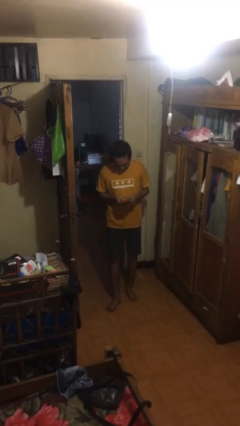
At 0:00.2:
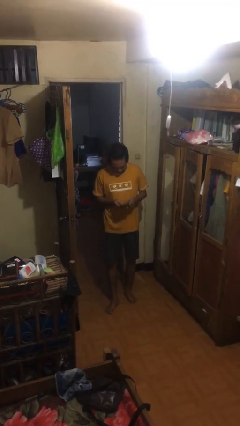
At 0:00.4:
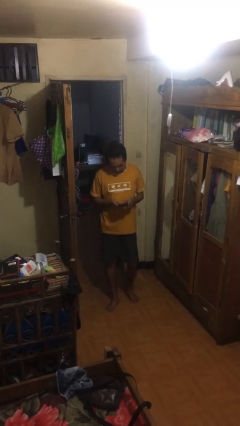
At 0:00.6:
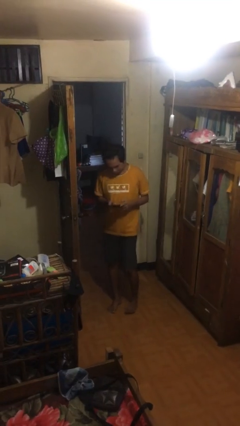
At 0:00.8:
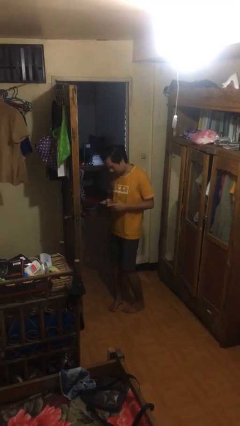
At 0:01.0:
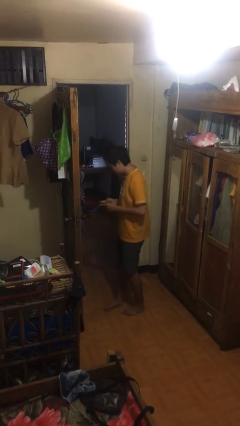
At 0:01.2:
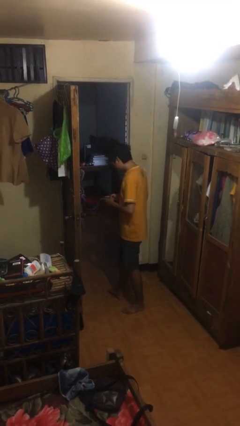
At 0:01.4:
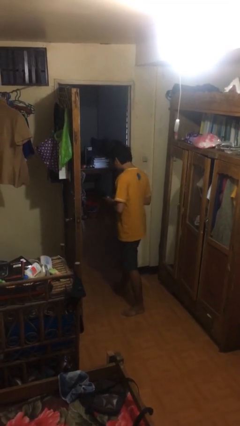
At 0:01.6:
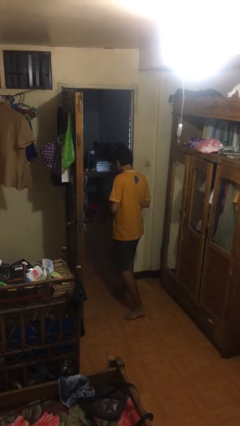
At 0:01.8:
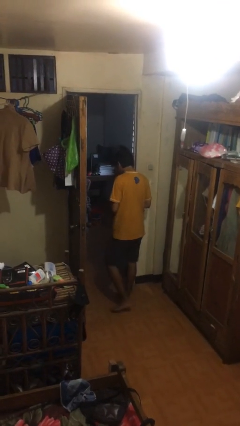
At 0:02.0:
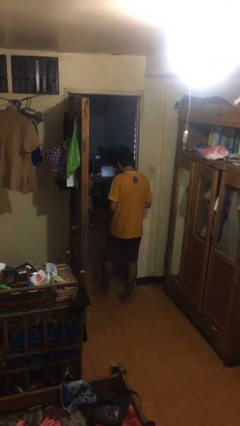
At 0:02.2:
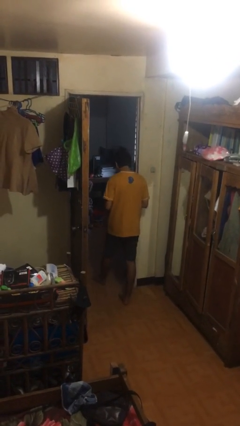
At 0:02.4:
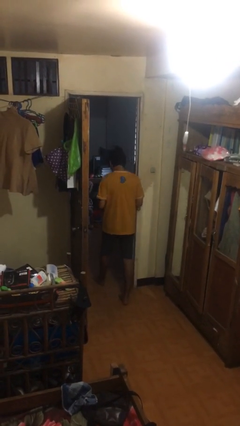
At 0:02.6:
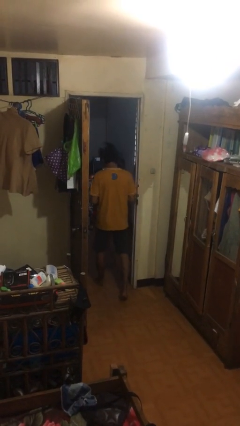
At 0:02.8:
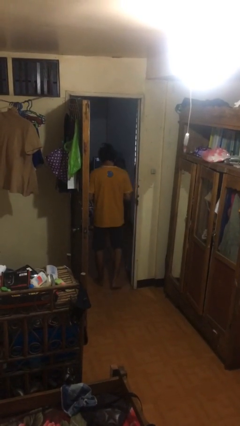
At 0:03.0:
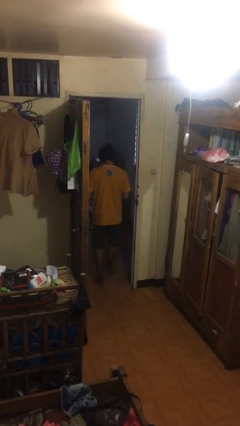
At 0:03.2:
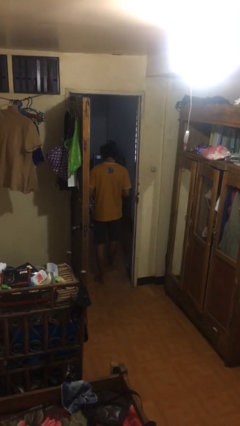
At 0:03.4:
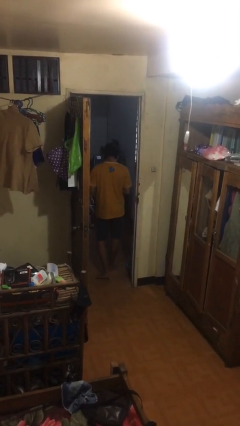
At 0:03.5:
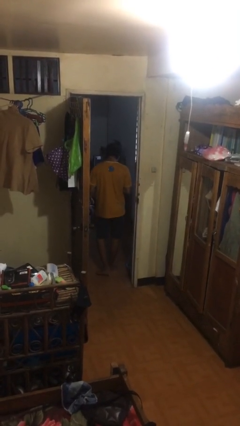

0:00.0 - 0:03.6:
person exits scene through structure

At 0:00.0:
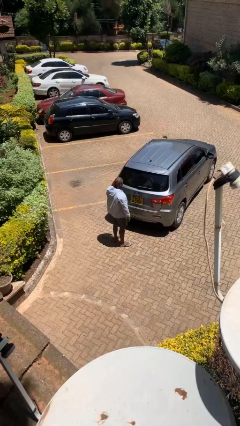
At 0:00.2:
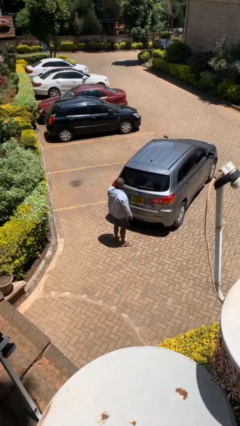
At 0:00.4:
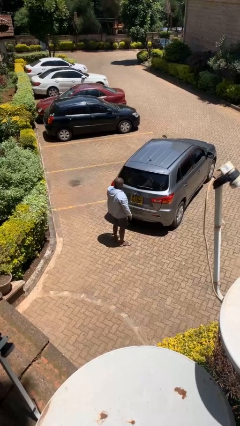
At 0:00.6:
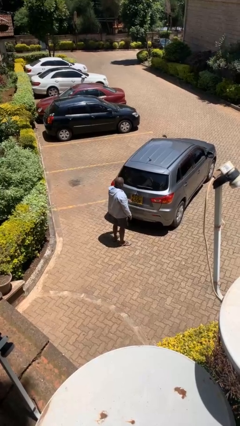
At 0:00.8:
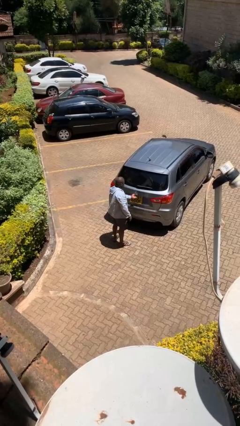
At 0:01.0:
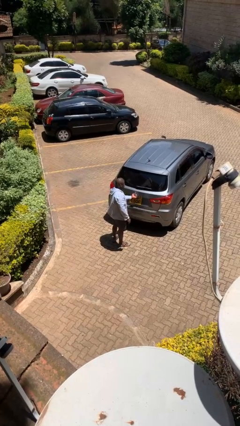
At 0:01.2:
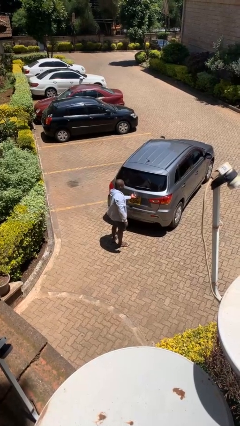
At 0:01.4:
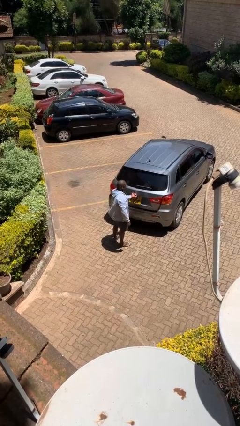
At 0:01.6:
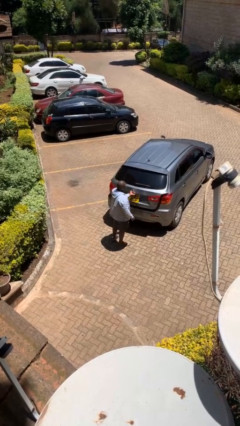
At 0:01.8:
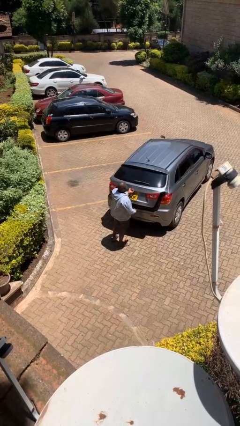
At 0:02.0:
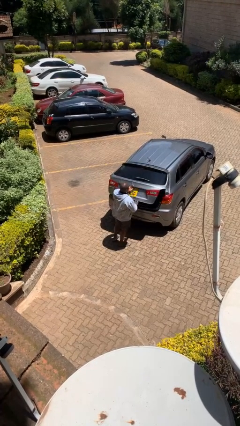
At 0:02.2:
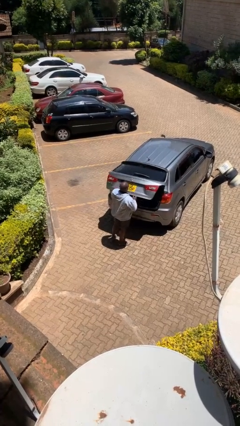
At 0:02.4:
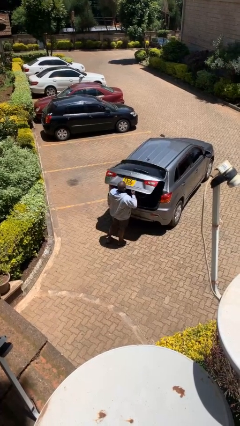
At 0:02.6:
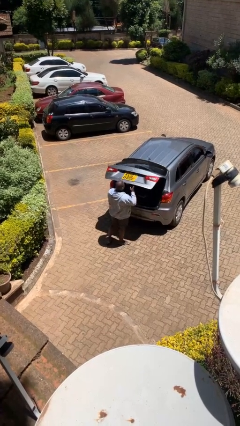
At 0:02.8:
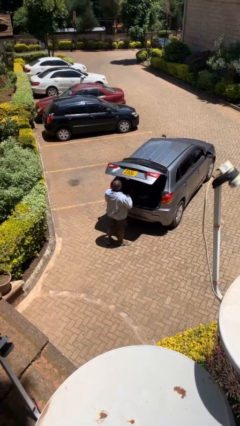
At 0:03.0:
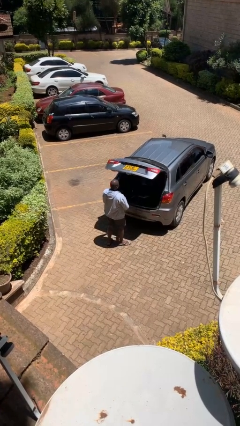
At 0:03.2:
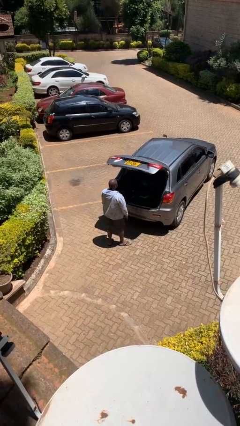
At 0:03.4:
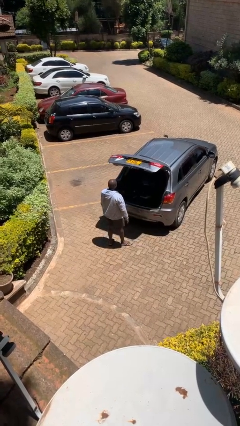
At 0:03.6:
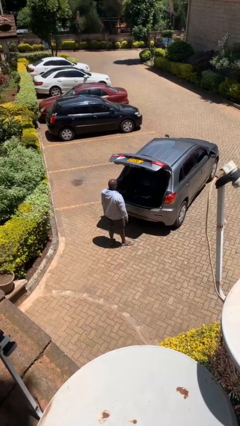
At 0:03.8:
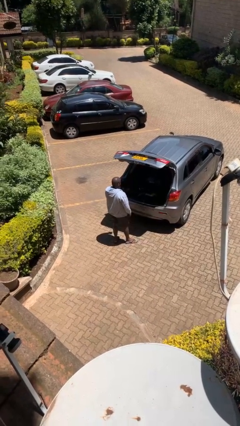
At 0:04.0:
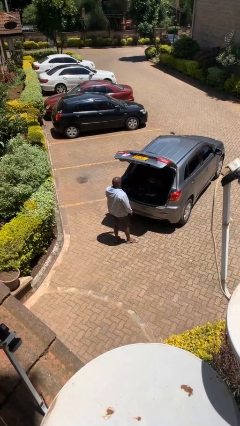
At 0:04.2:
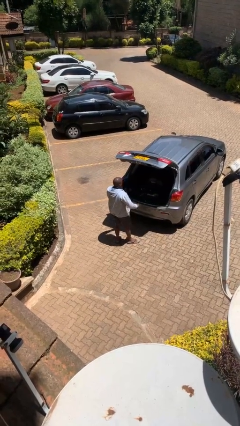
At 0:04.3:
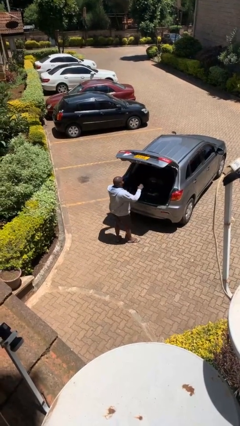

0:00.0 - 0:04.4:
person opens car trunk

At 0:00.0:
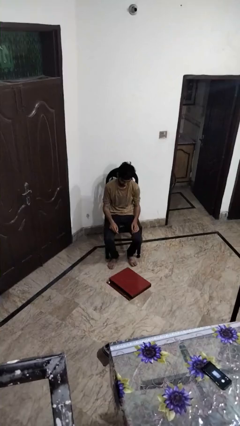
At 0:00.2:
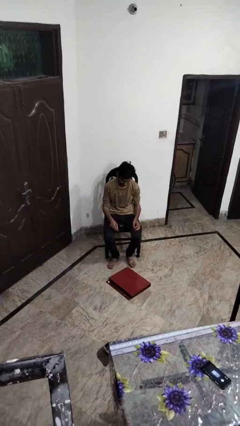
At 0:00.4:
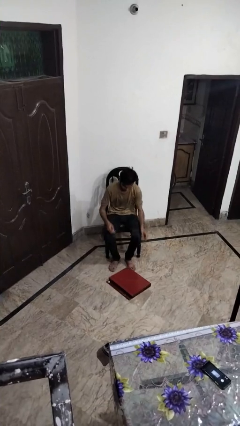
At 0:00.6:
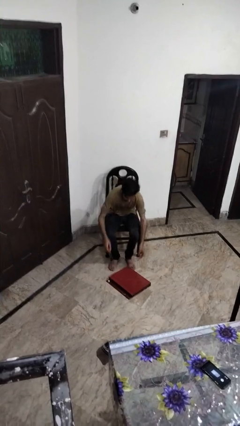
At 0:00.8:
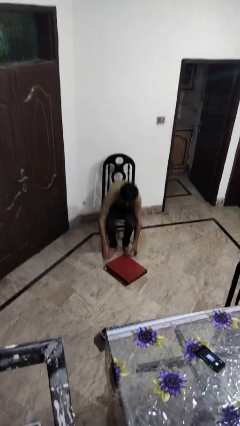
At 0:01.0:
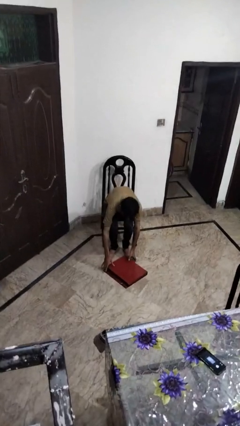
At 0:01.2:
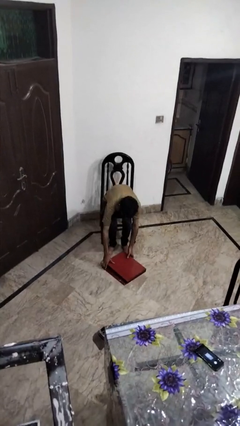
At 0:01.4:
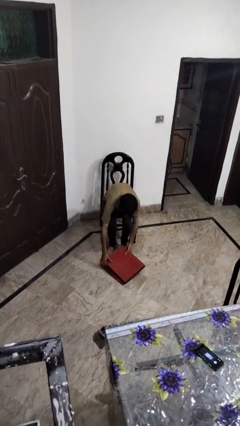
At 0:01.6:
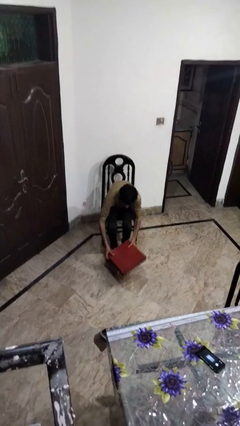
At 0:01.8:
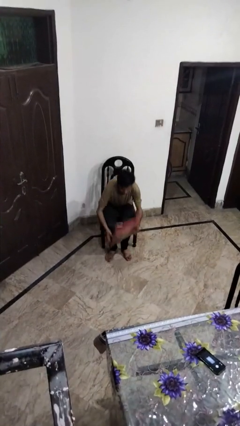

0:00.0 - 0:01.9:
person picks up object from floor

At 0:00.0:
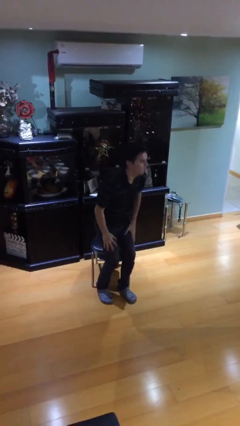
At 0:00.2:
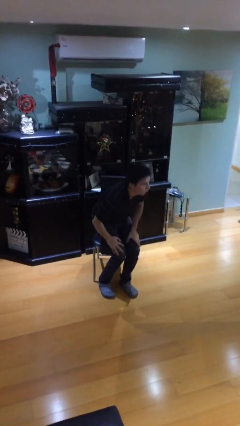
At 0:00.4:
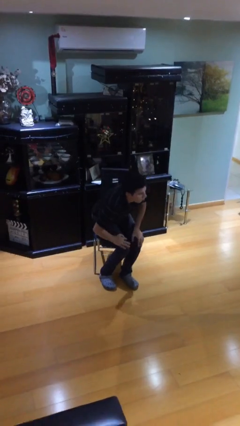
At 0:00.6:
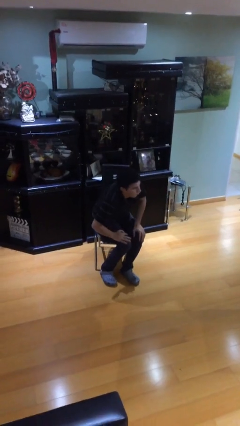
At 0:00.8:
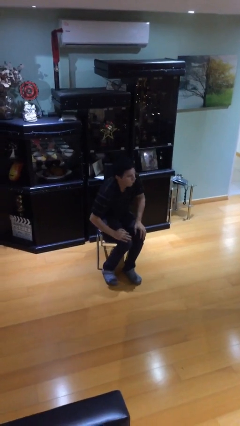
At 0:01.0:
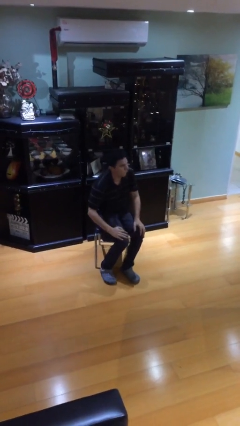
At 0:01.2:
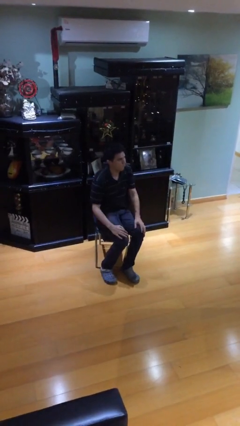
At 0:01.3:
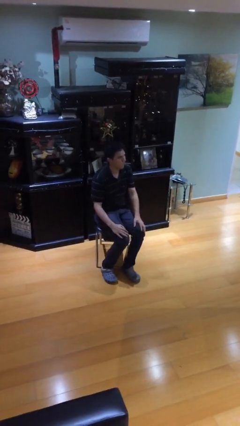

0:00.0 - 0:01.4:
person sits down

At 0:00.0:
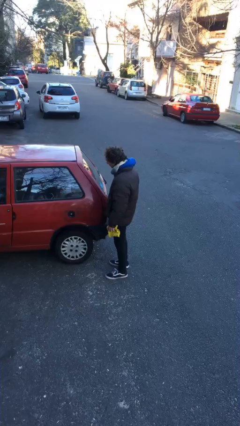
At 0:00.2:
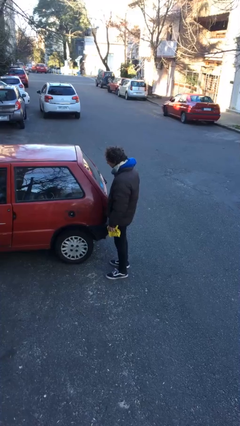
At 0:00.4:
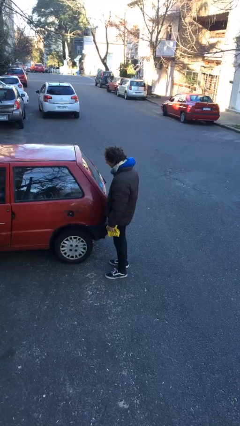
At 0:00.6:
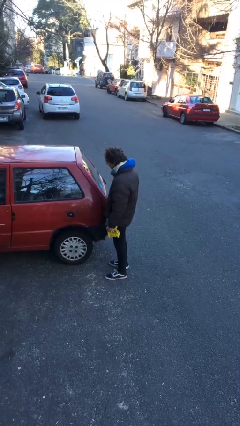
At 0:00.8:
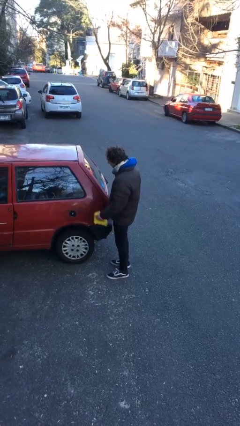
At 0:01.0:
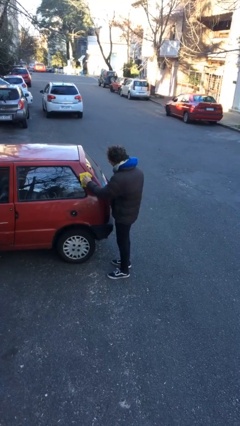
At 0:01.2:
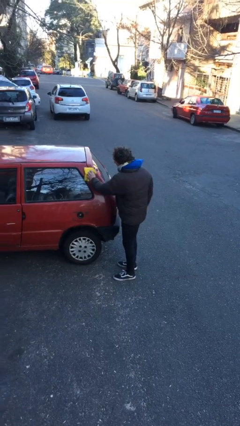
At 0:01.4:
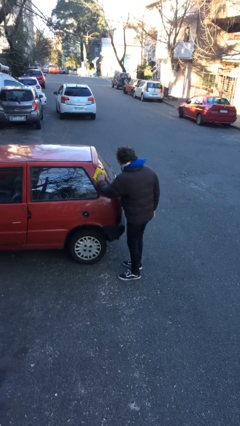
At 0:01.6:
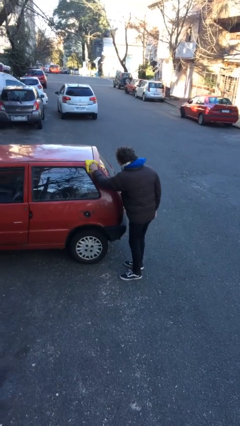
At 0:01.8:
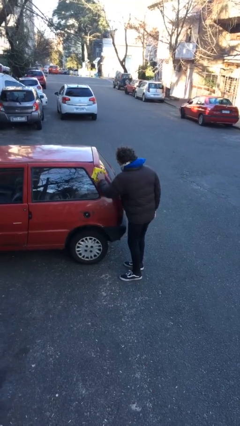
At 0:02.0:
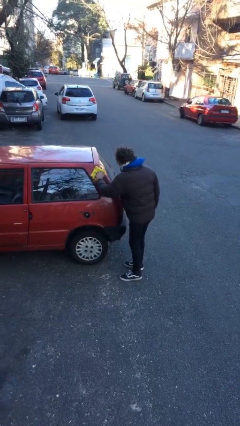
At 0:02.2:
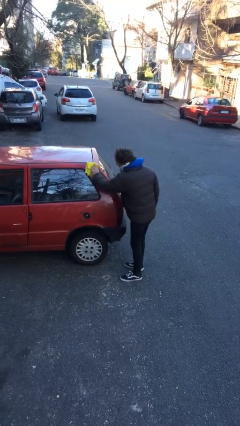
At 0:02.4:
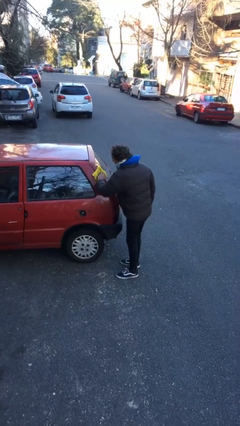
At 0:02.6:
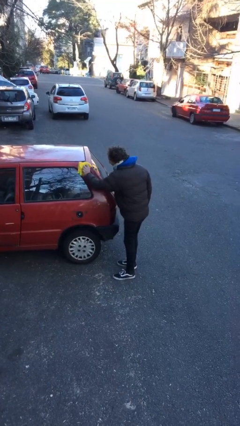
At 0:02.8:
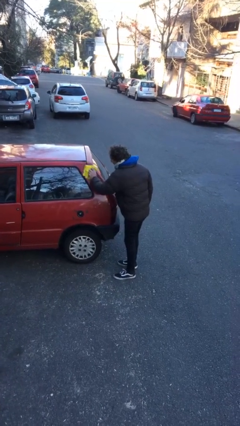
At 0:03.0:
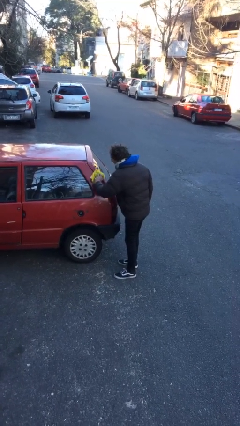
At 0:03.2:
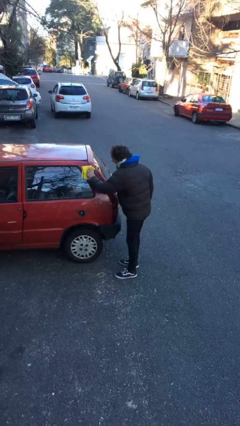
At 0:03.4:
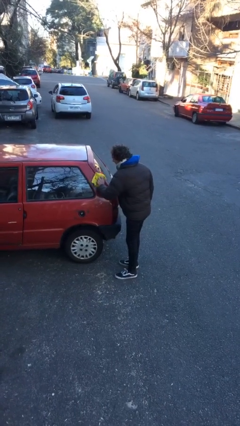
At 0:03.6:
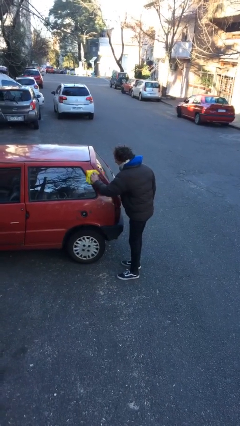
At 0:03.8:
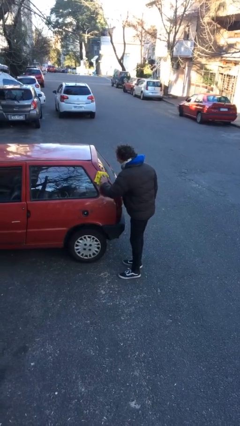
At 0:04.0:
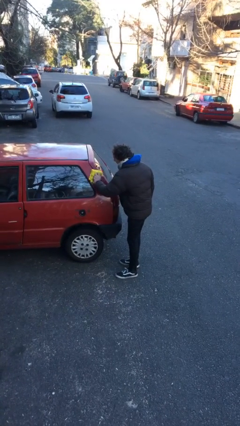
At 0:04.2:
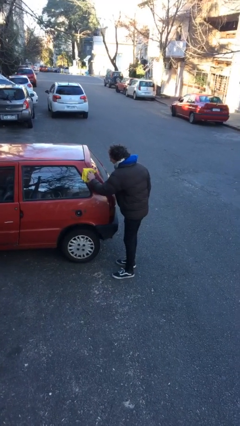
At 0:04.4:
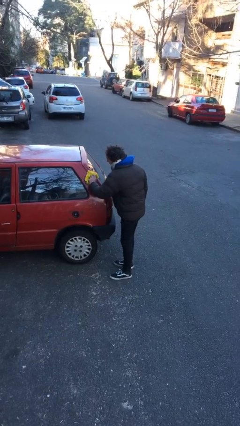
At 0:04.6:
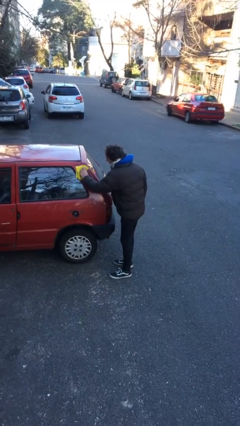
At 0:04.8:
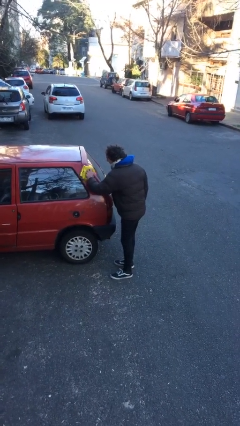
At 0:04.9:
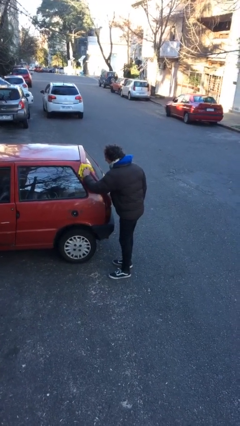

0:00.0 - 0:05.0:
person polishes car with rag

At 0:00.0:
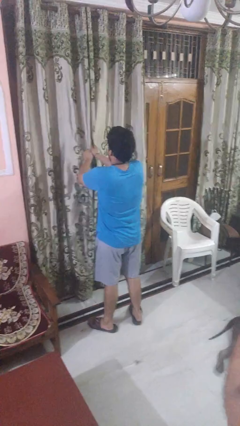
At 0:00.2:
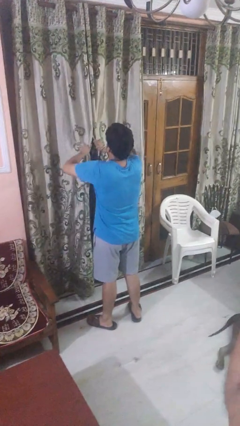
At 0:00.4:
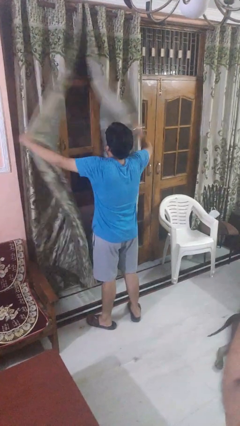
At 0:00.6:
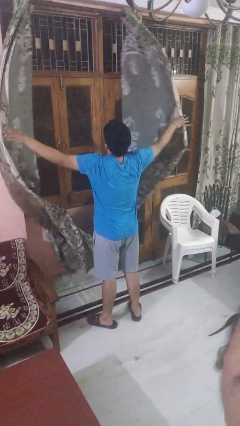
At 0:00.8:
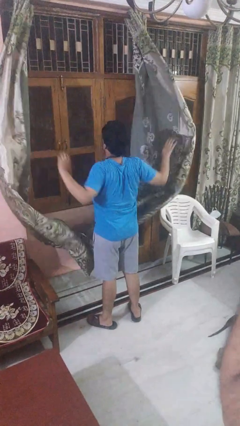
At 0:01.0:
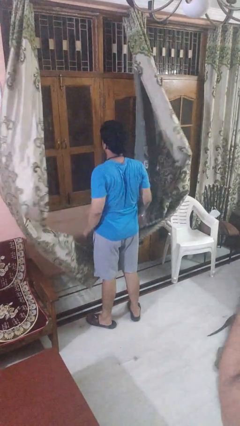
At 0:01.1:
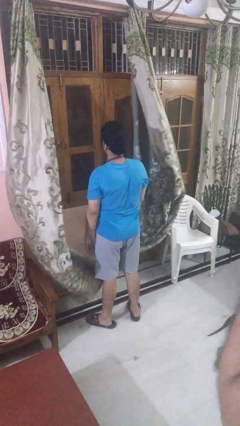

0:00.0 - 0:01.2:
person opens curtains
